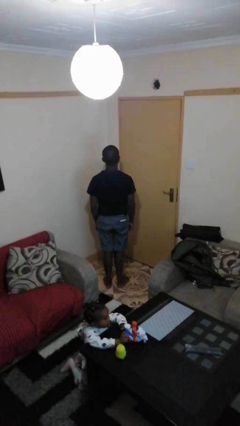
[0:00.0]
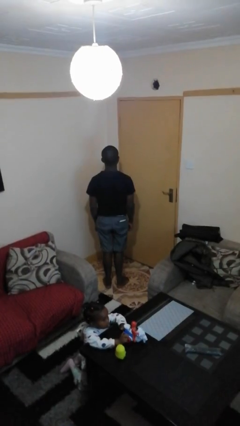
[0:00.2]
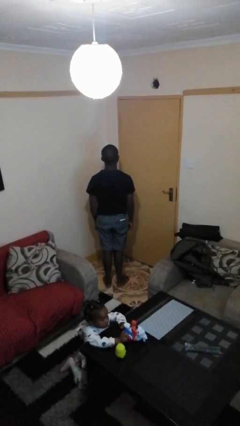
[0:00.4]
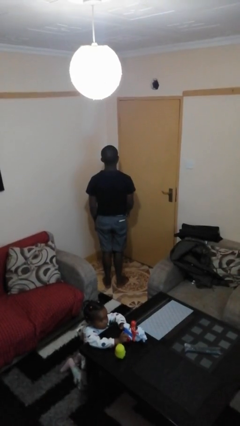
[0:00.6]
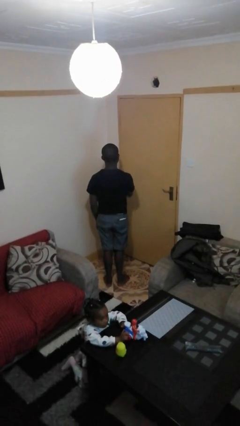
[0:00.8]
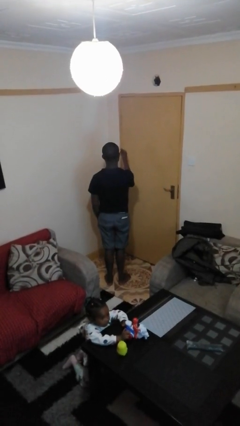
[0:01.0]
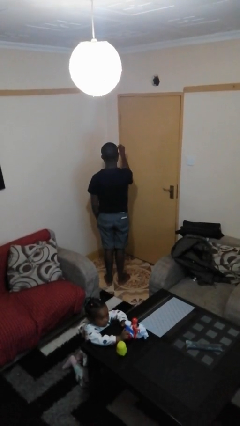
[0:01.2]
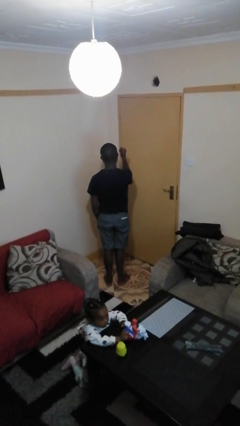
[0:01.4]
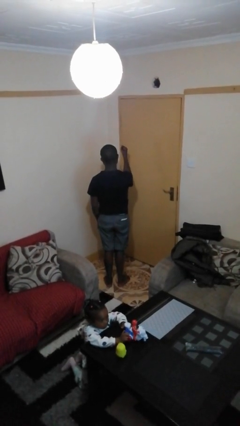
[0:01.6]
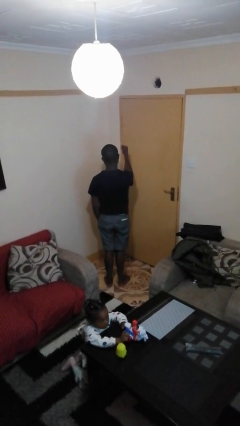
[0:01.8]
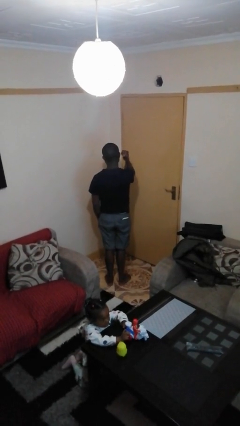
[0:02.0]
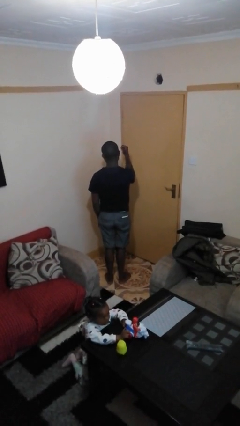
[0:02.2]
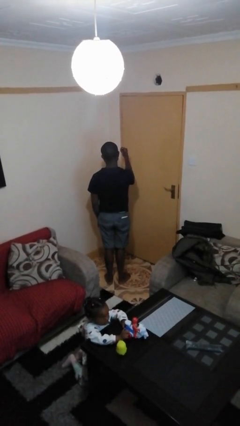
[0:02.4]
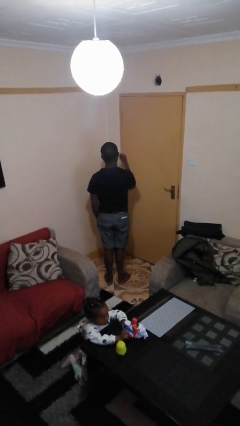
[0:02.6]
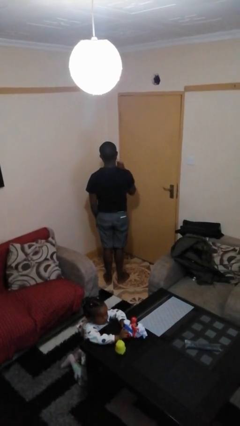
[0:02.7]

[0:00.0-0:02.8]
person gestures behind me

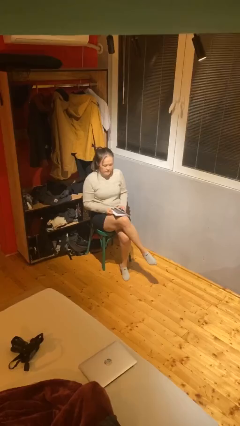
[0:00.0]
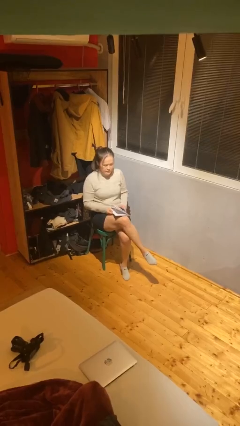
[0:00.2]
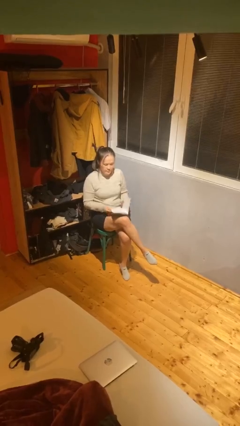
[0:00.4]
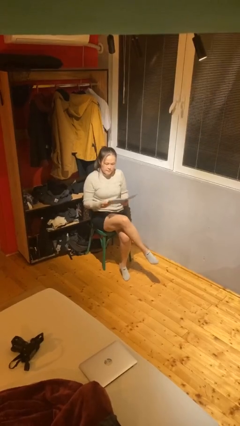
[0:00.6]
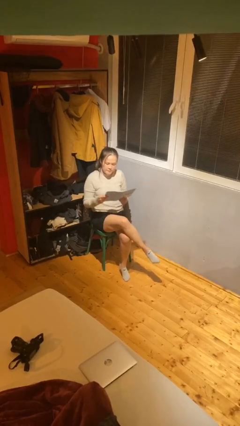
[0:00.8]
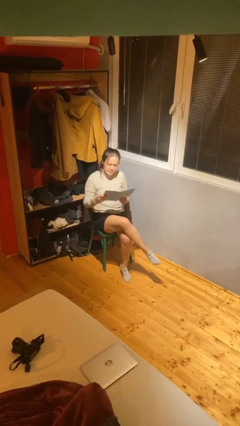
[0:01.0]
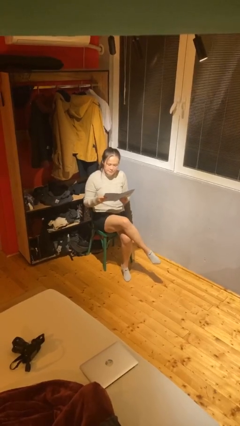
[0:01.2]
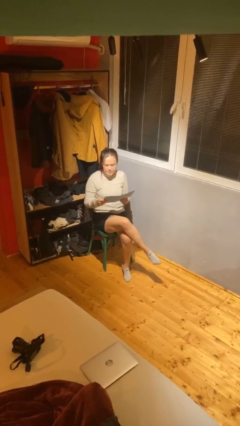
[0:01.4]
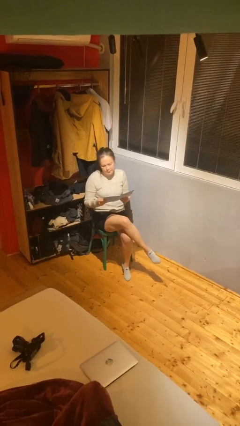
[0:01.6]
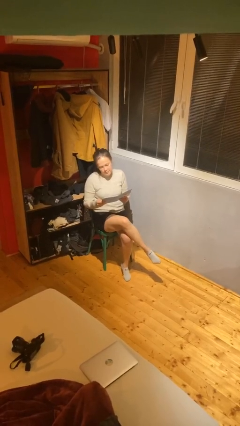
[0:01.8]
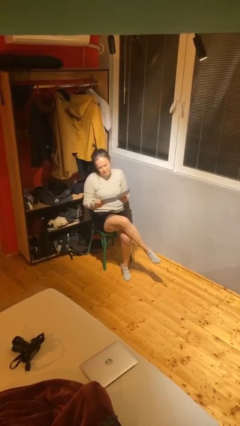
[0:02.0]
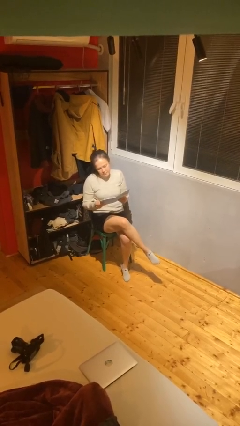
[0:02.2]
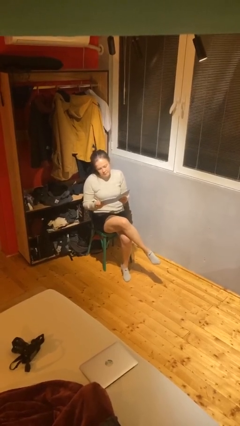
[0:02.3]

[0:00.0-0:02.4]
person reads document

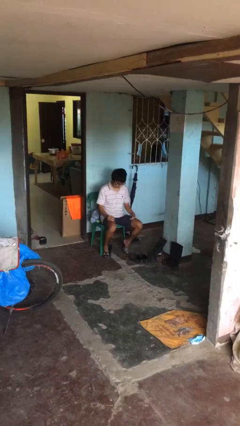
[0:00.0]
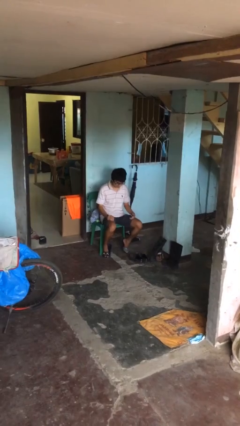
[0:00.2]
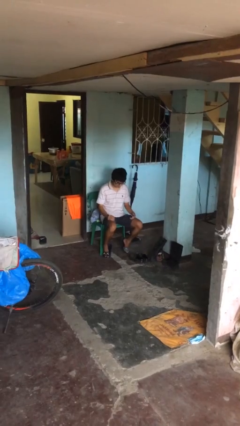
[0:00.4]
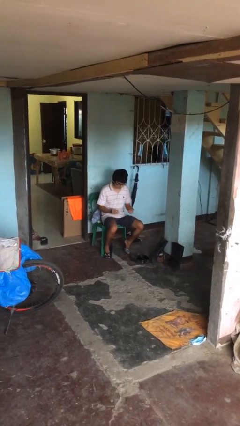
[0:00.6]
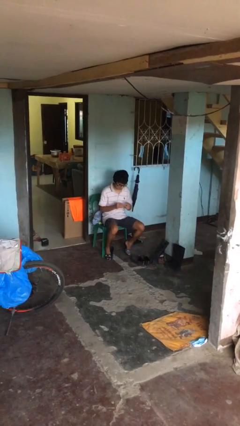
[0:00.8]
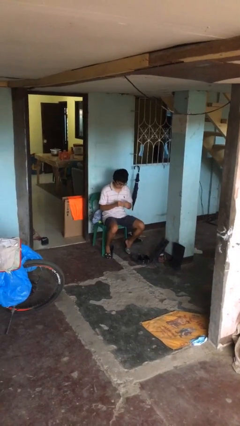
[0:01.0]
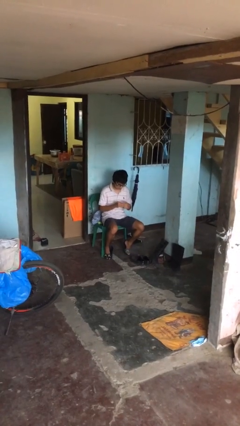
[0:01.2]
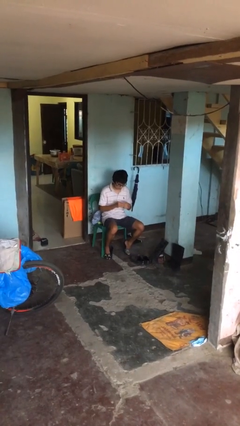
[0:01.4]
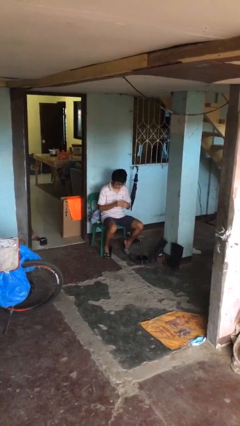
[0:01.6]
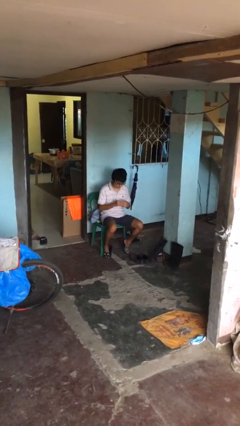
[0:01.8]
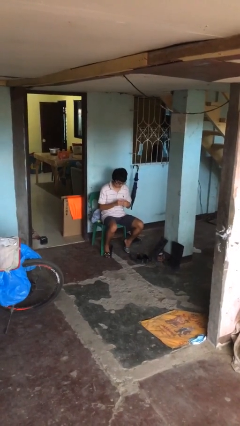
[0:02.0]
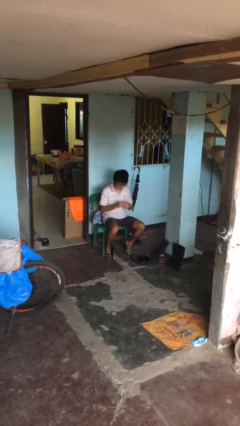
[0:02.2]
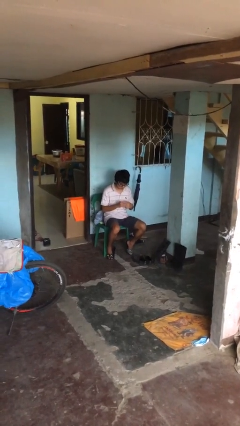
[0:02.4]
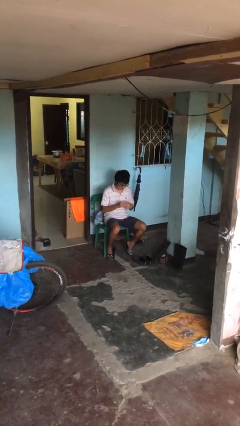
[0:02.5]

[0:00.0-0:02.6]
person puts on ring

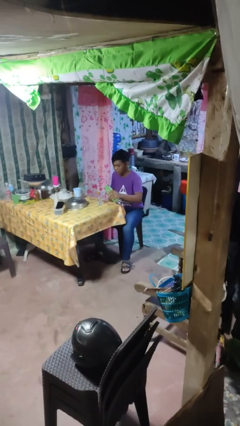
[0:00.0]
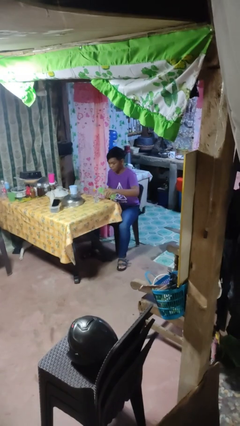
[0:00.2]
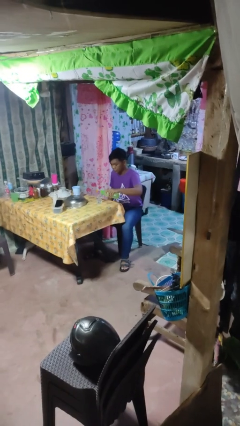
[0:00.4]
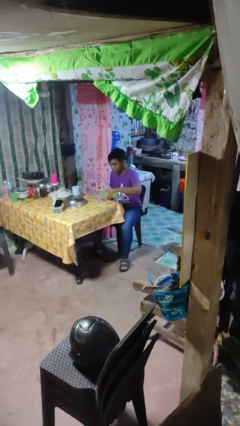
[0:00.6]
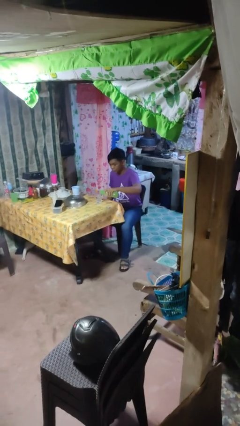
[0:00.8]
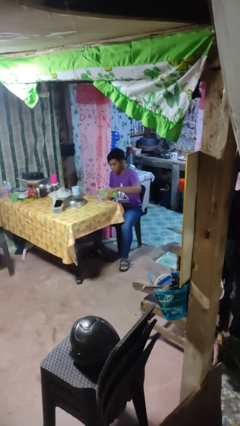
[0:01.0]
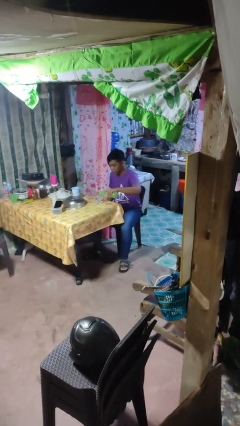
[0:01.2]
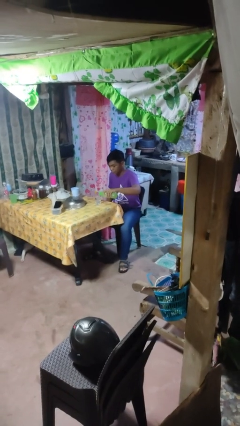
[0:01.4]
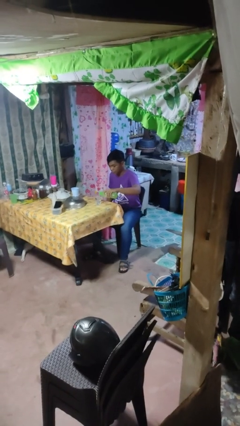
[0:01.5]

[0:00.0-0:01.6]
person pours liquid into cup

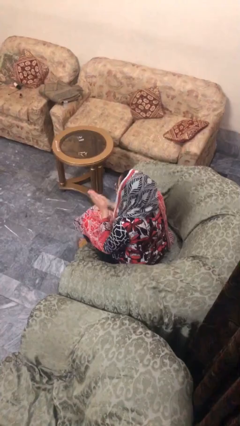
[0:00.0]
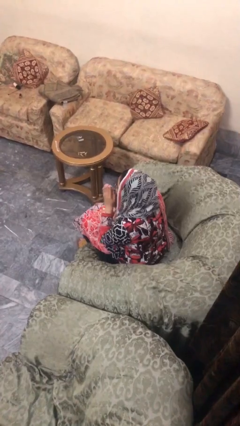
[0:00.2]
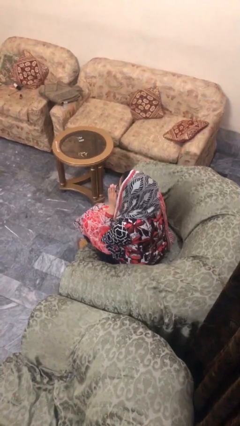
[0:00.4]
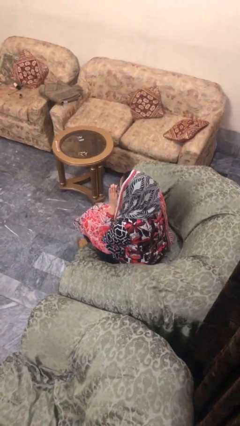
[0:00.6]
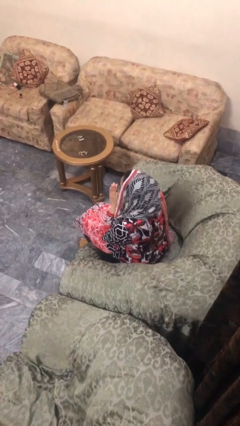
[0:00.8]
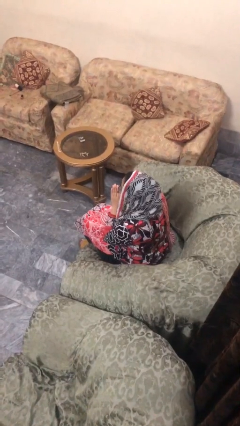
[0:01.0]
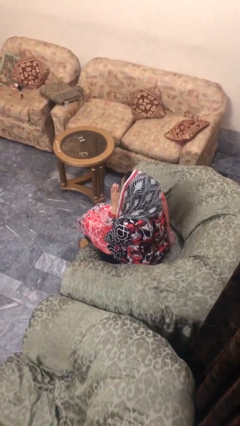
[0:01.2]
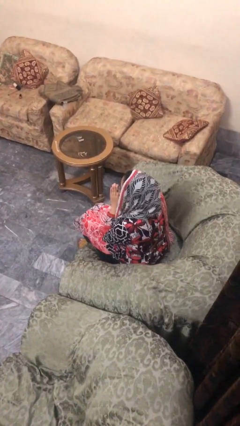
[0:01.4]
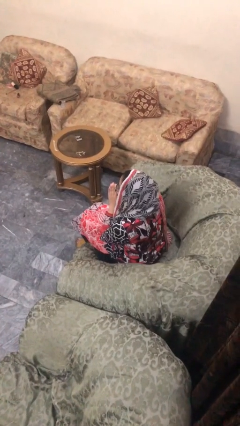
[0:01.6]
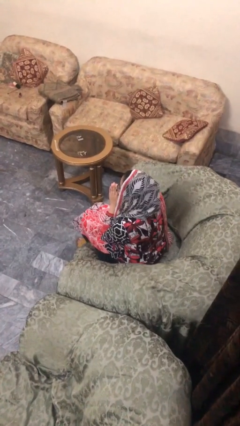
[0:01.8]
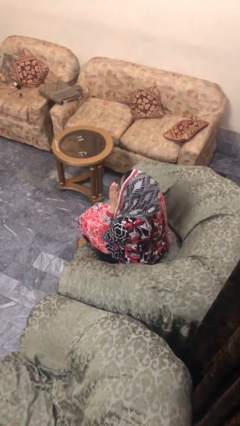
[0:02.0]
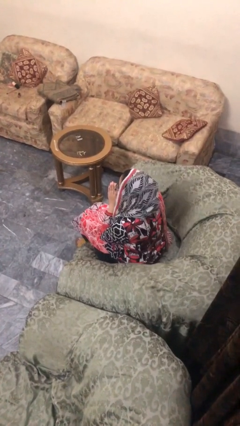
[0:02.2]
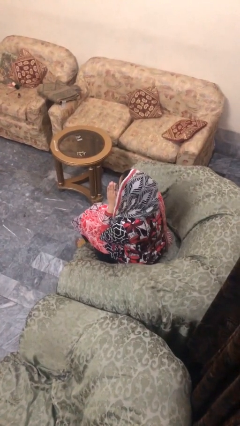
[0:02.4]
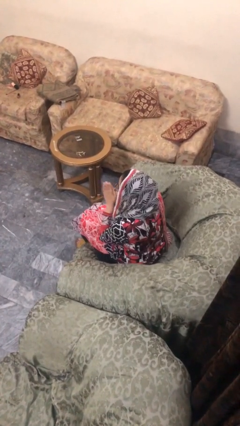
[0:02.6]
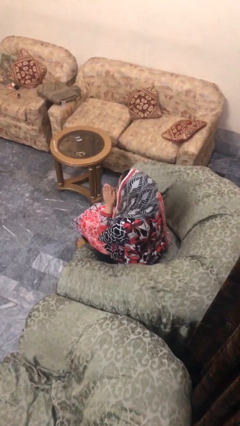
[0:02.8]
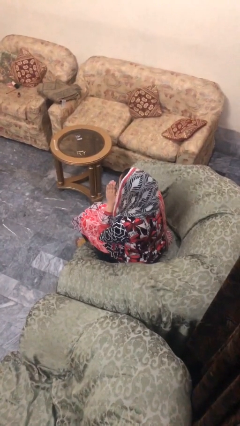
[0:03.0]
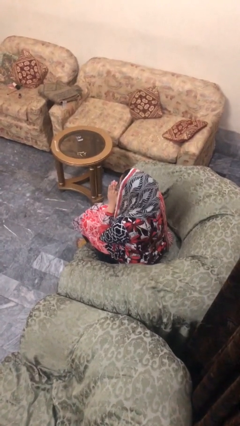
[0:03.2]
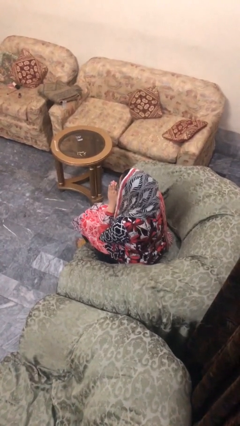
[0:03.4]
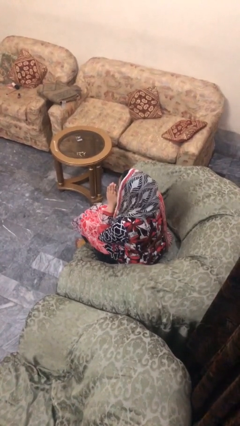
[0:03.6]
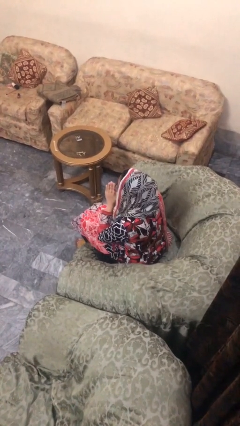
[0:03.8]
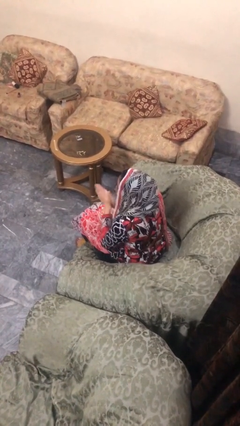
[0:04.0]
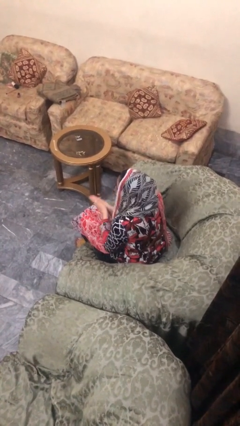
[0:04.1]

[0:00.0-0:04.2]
person blows into hands

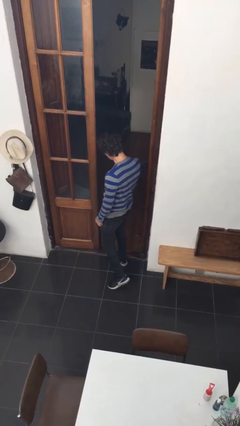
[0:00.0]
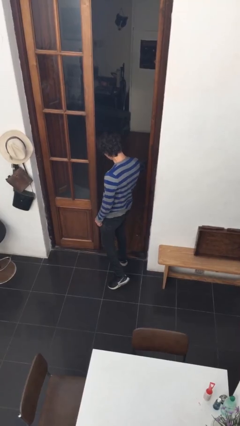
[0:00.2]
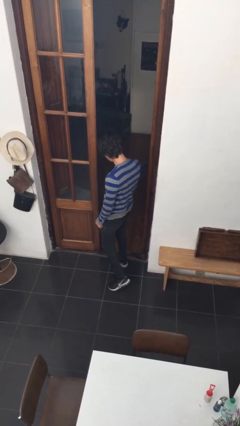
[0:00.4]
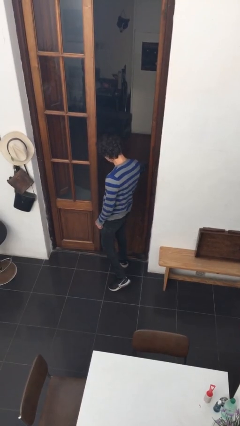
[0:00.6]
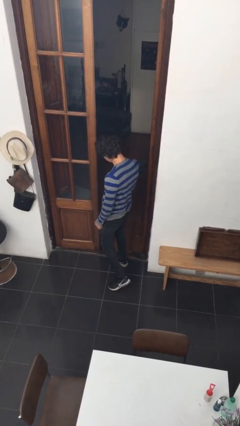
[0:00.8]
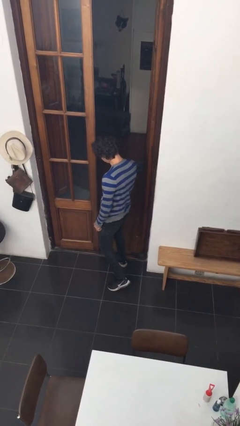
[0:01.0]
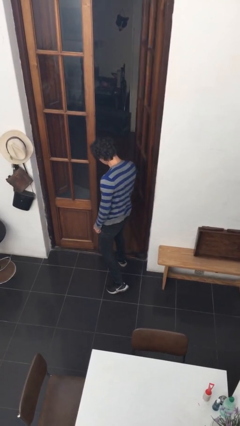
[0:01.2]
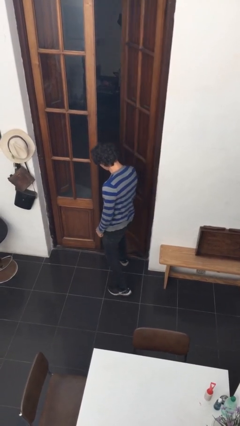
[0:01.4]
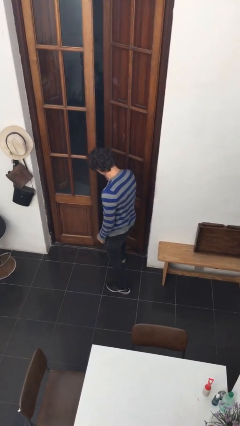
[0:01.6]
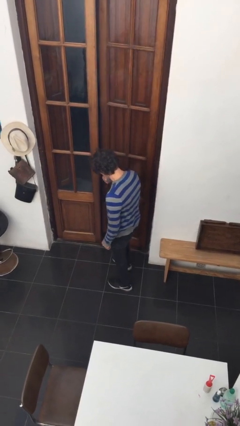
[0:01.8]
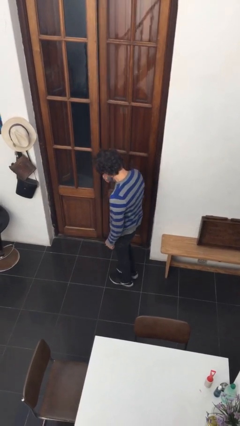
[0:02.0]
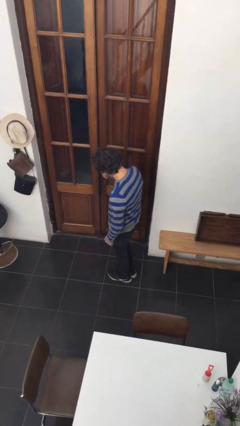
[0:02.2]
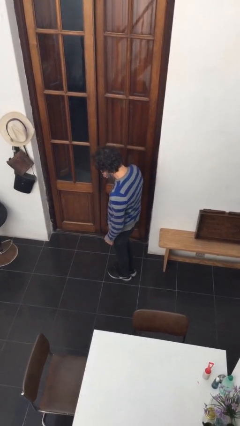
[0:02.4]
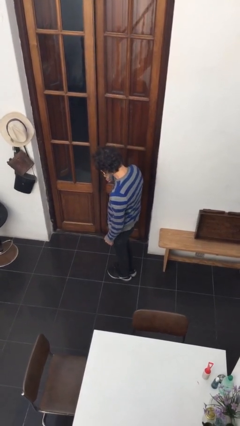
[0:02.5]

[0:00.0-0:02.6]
person closes facility door

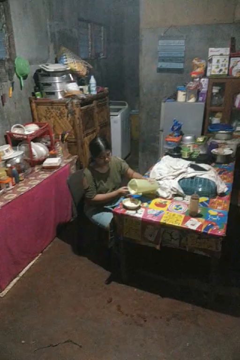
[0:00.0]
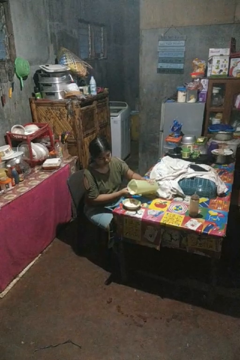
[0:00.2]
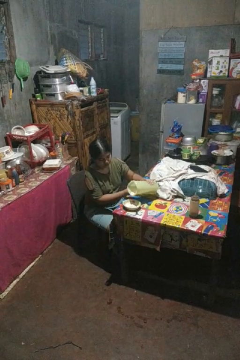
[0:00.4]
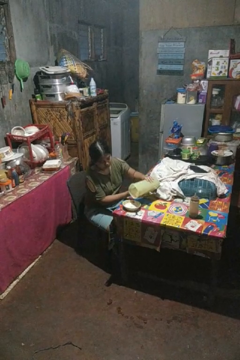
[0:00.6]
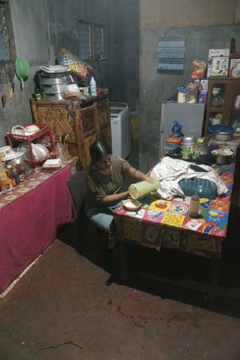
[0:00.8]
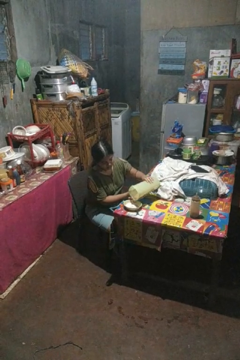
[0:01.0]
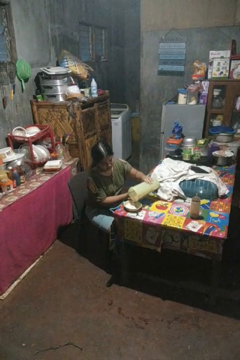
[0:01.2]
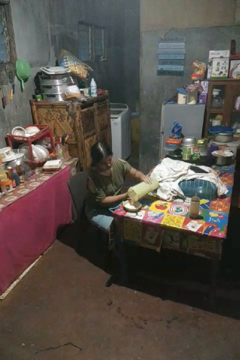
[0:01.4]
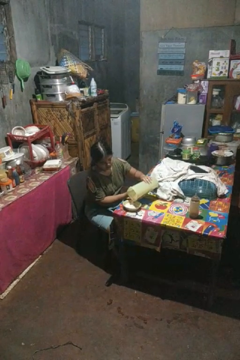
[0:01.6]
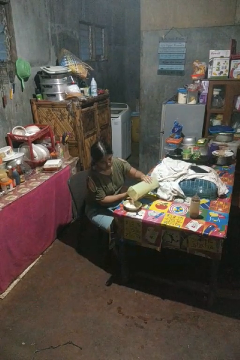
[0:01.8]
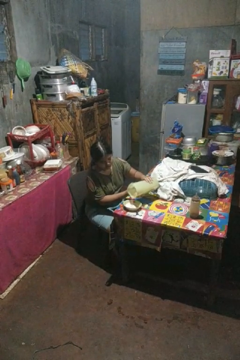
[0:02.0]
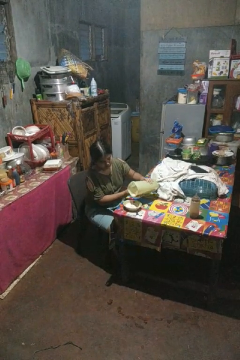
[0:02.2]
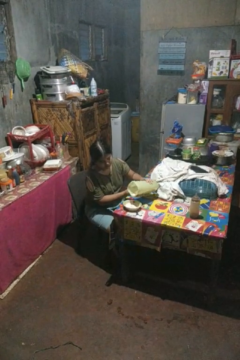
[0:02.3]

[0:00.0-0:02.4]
person pours into bowl
